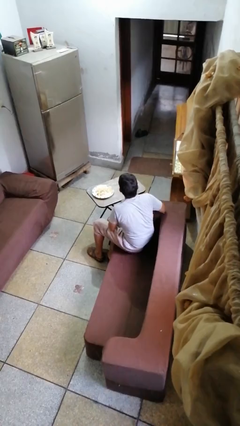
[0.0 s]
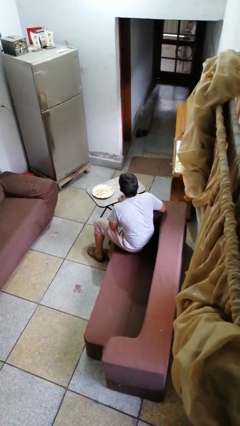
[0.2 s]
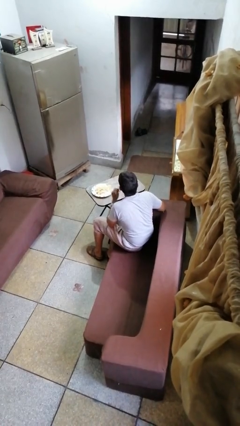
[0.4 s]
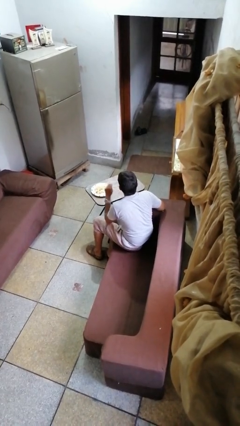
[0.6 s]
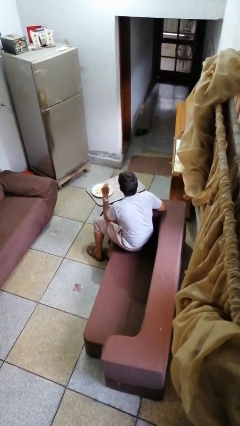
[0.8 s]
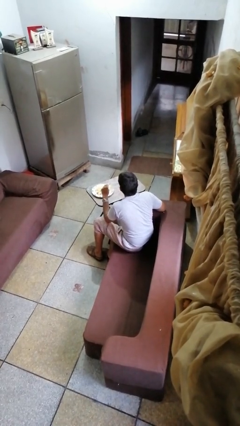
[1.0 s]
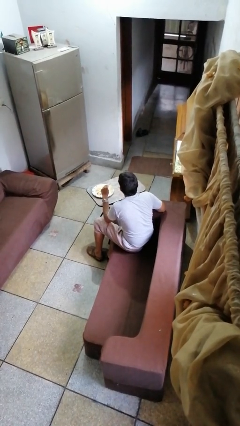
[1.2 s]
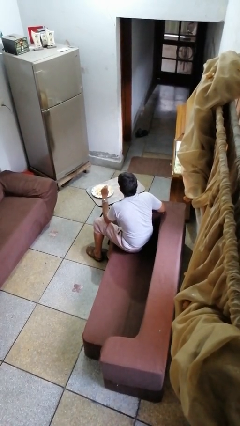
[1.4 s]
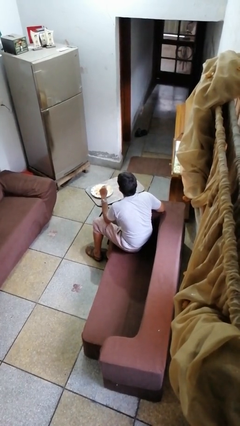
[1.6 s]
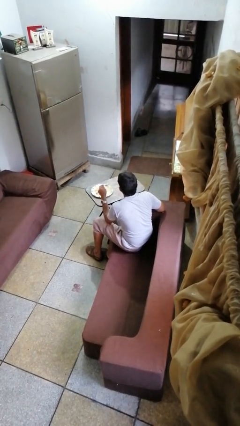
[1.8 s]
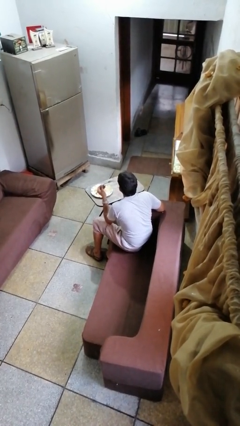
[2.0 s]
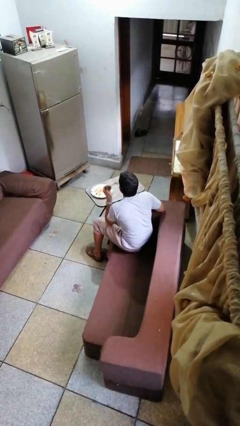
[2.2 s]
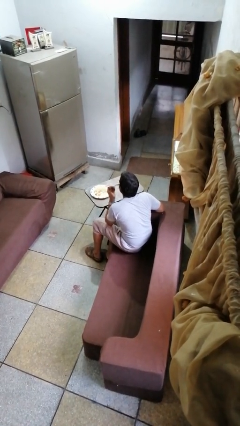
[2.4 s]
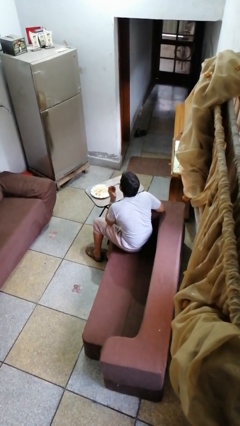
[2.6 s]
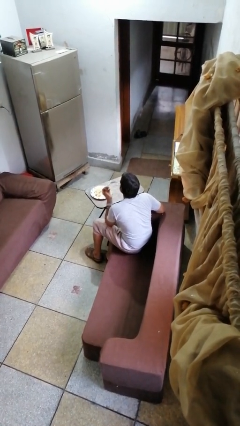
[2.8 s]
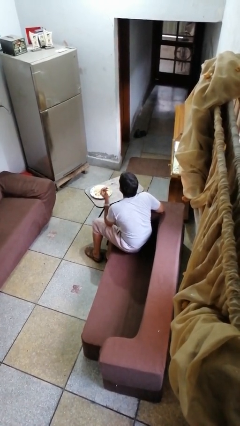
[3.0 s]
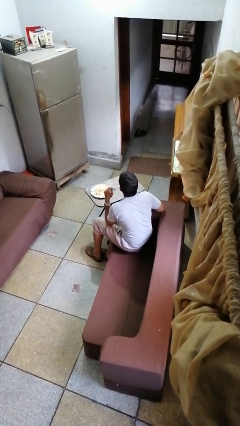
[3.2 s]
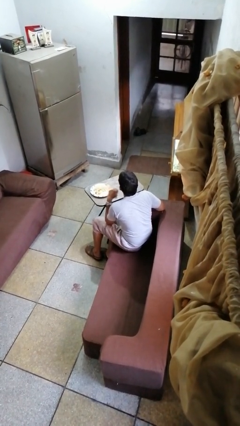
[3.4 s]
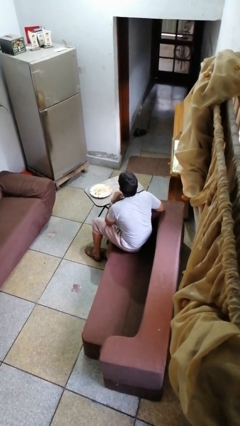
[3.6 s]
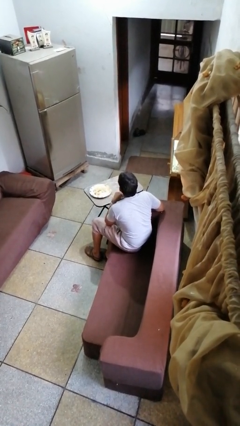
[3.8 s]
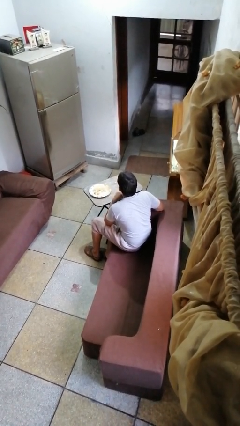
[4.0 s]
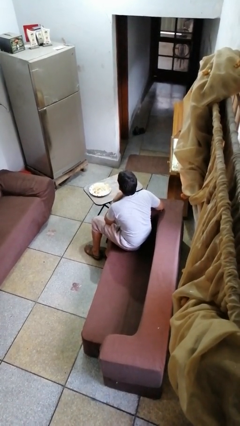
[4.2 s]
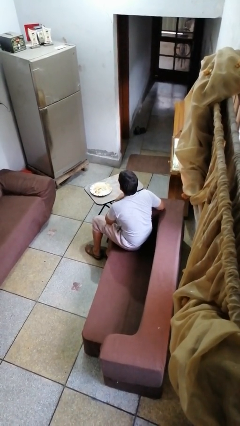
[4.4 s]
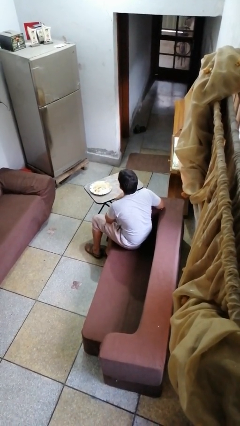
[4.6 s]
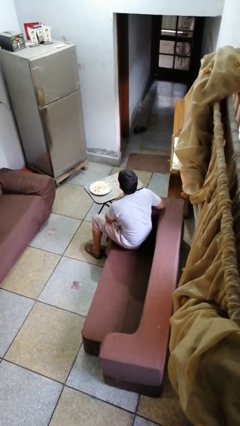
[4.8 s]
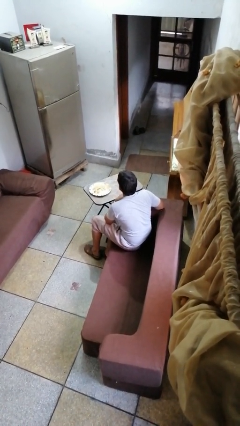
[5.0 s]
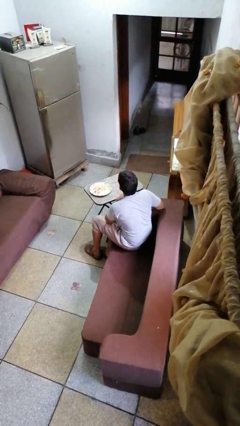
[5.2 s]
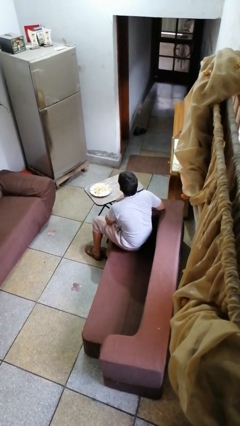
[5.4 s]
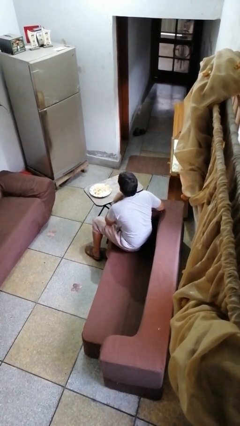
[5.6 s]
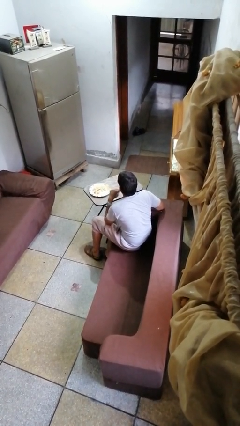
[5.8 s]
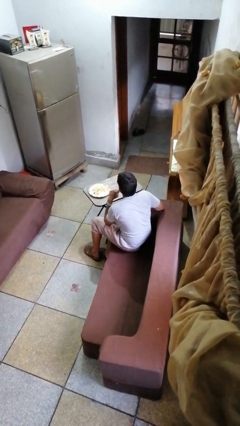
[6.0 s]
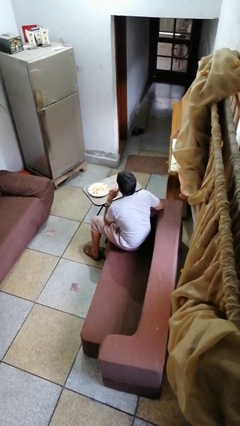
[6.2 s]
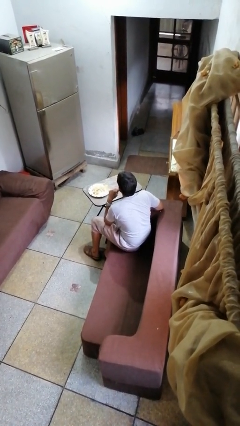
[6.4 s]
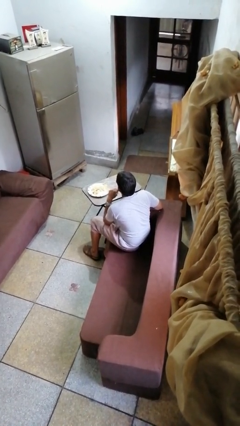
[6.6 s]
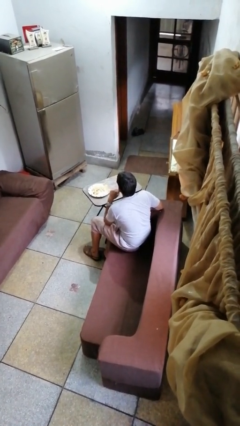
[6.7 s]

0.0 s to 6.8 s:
person eats with utensil

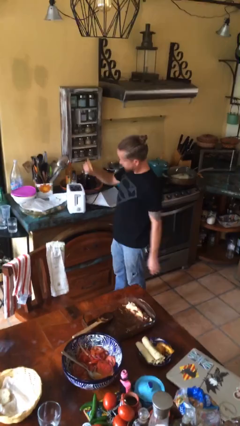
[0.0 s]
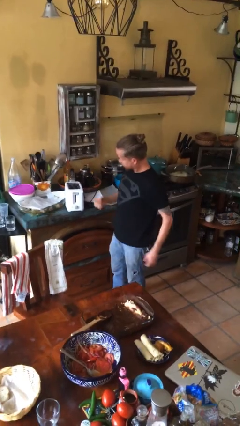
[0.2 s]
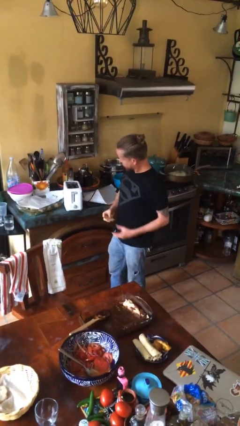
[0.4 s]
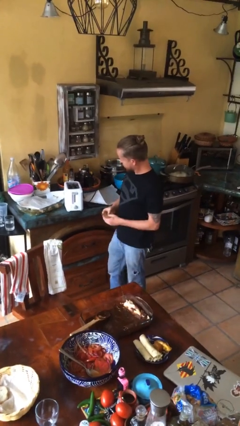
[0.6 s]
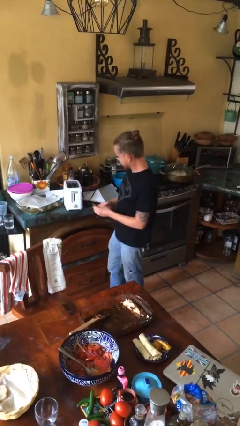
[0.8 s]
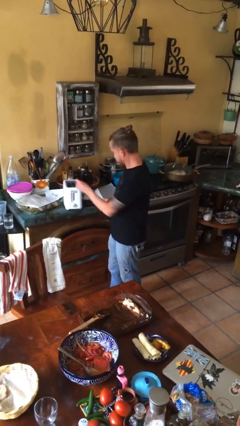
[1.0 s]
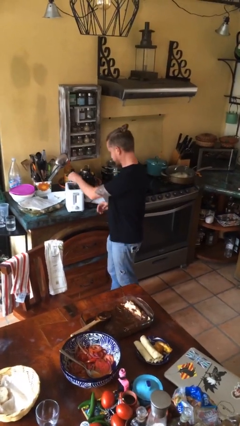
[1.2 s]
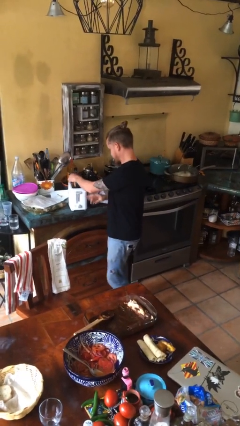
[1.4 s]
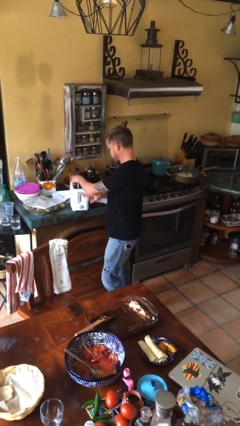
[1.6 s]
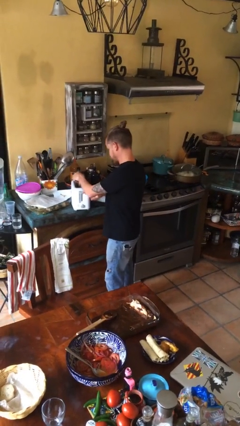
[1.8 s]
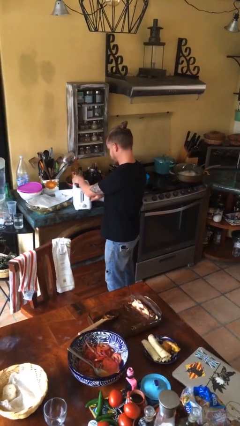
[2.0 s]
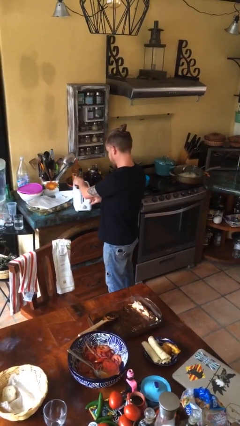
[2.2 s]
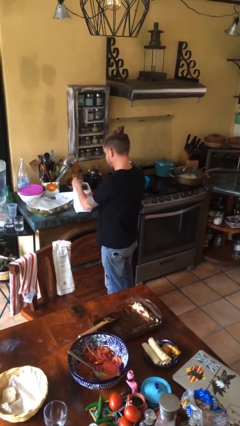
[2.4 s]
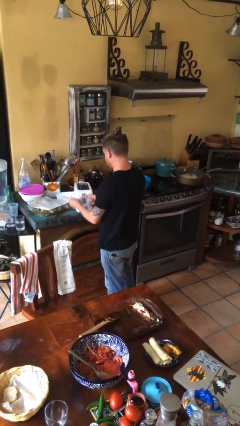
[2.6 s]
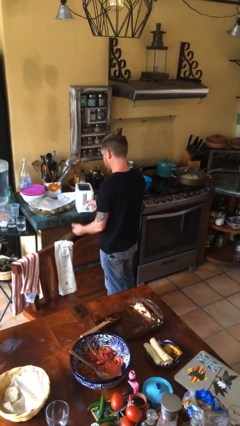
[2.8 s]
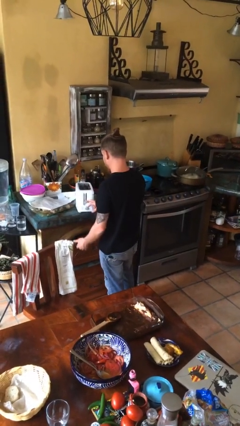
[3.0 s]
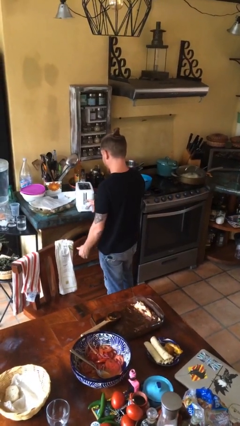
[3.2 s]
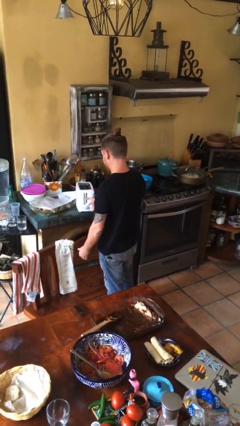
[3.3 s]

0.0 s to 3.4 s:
person puts object into toaster

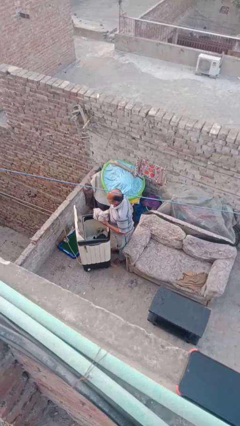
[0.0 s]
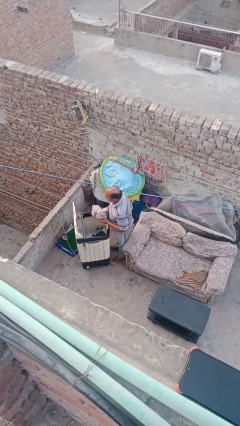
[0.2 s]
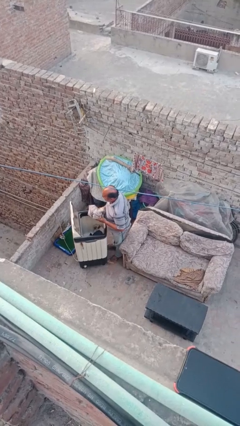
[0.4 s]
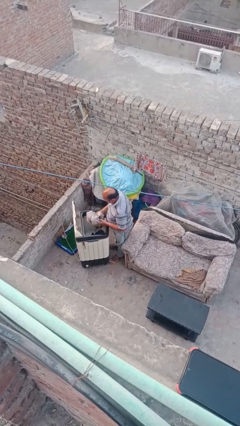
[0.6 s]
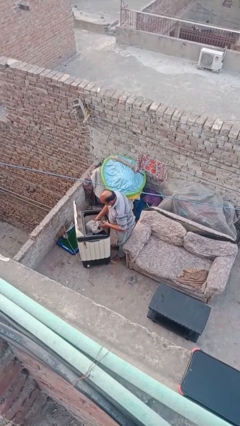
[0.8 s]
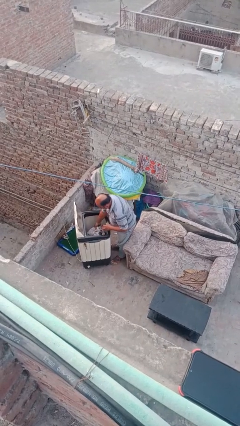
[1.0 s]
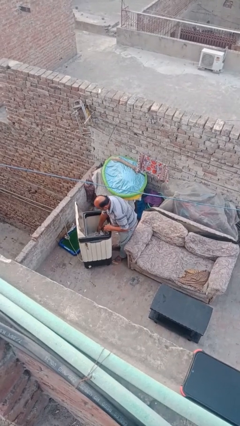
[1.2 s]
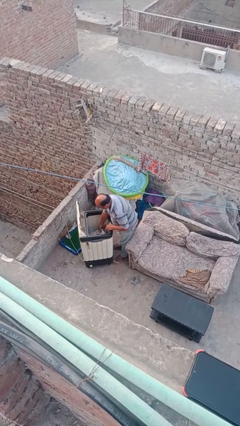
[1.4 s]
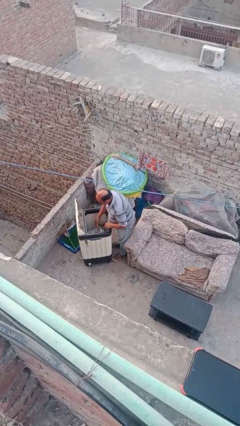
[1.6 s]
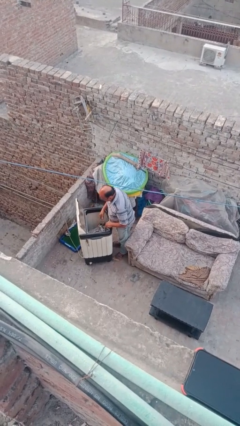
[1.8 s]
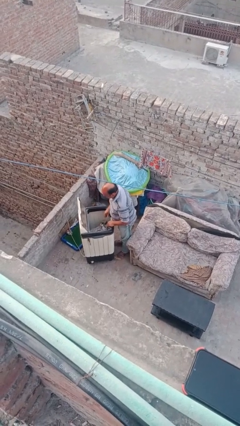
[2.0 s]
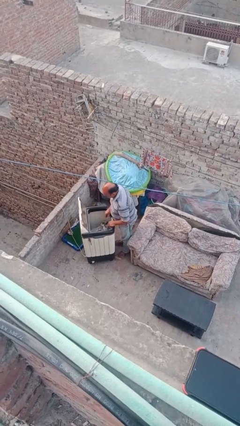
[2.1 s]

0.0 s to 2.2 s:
person loads clotheswasher

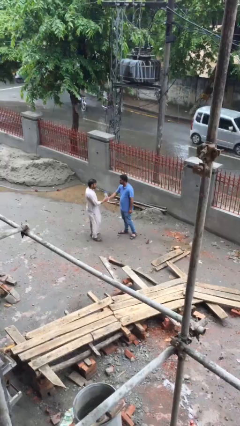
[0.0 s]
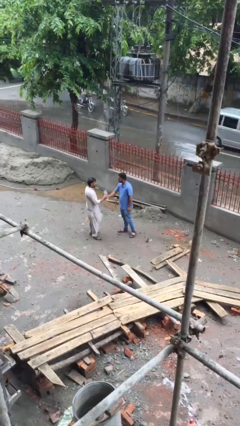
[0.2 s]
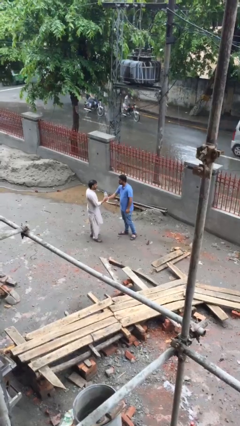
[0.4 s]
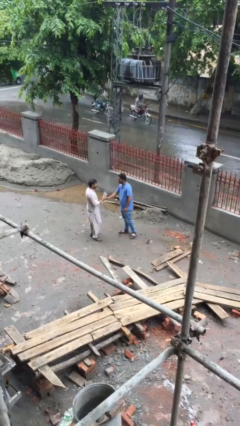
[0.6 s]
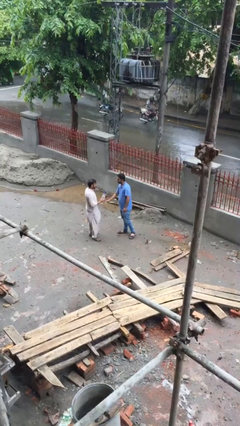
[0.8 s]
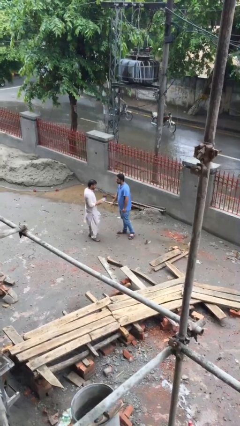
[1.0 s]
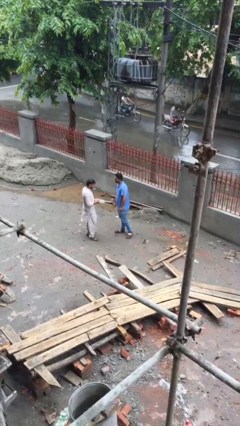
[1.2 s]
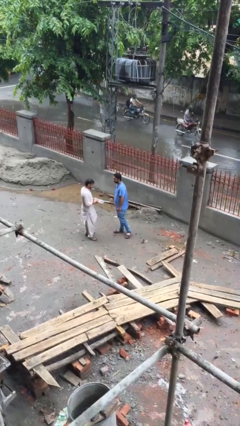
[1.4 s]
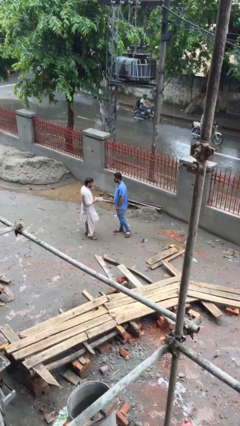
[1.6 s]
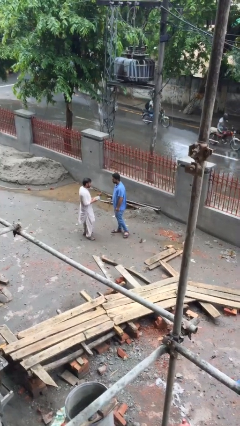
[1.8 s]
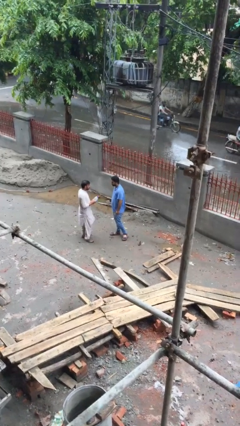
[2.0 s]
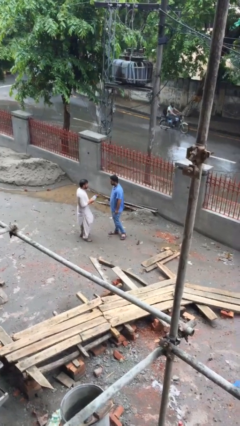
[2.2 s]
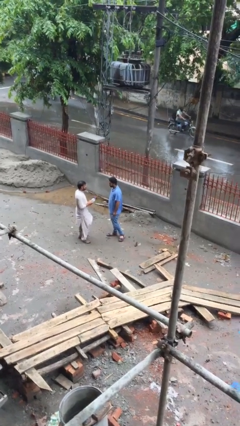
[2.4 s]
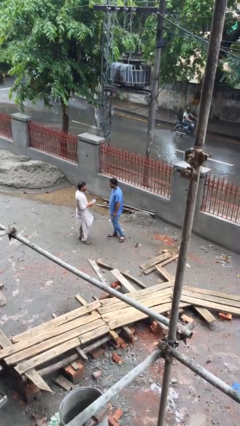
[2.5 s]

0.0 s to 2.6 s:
person transfers object to person

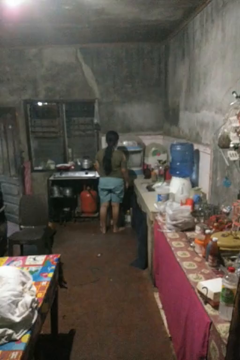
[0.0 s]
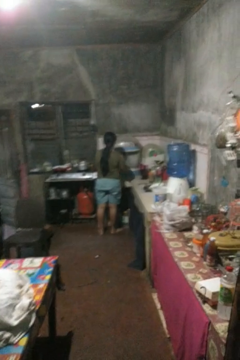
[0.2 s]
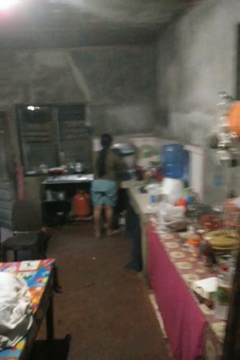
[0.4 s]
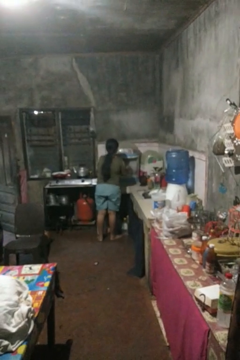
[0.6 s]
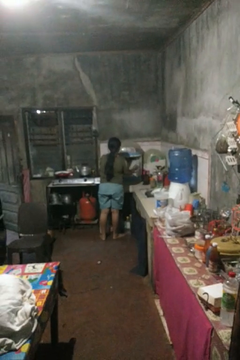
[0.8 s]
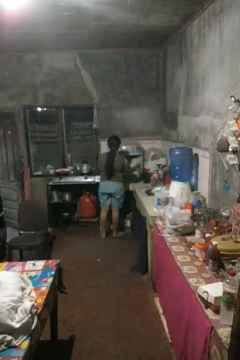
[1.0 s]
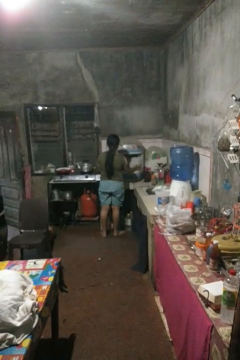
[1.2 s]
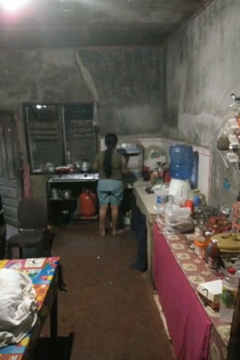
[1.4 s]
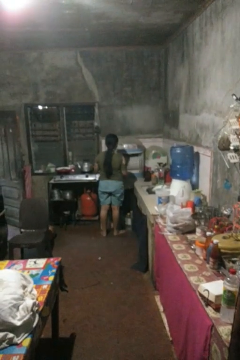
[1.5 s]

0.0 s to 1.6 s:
person opens kitchen drawer

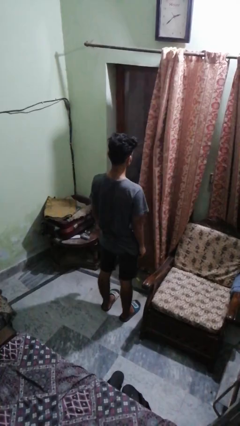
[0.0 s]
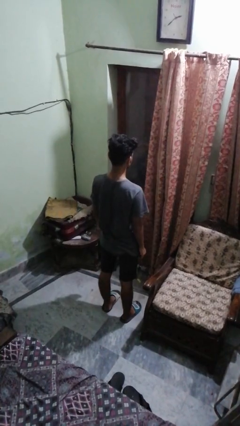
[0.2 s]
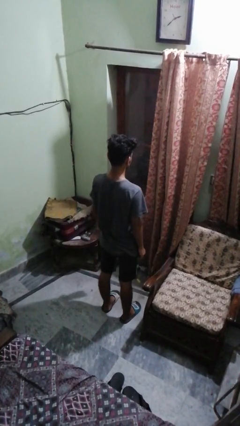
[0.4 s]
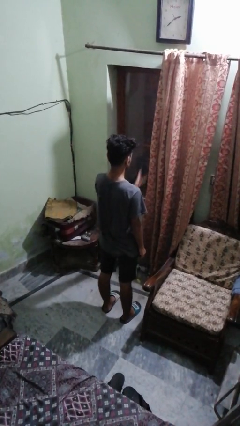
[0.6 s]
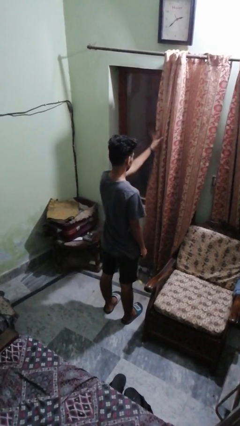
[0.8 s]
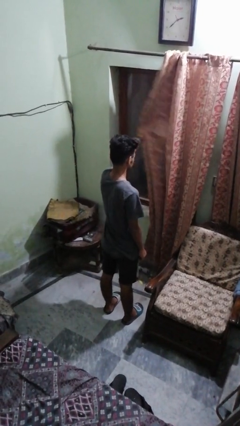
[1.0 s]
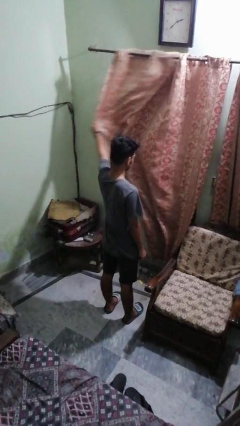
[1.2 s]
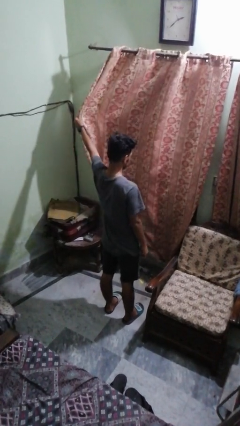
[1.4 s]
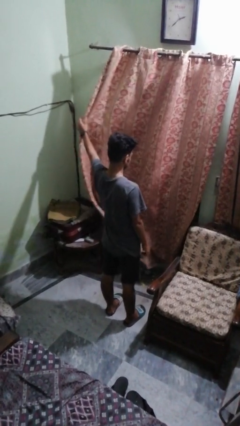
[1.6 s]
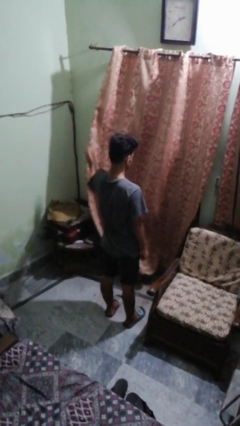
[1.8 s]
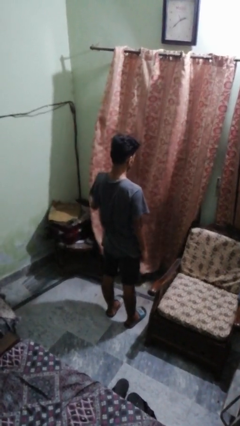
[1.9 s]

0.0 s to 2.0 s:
person closes curtains
